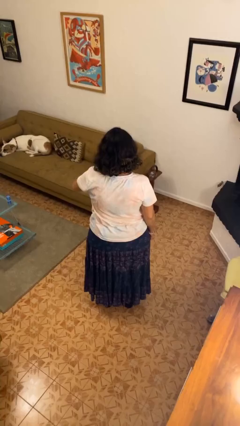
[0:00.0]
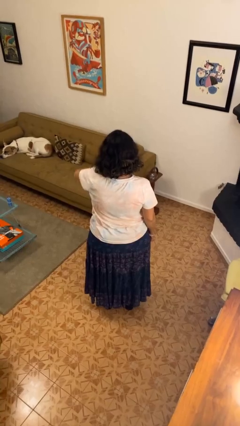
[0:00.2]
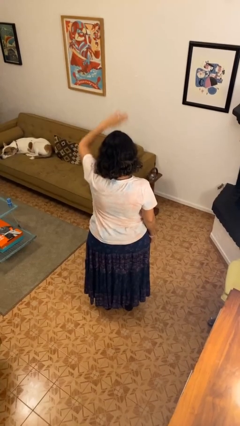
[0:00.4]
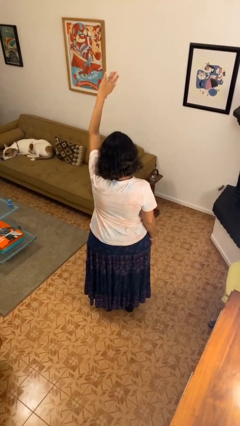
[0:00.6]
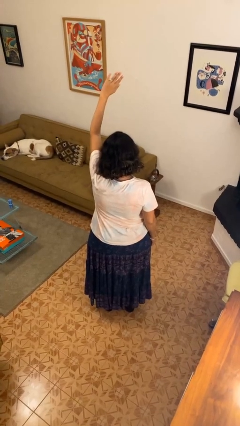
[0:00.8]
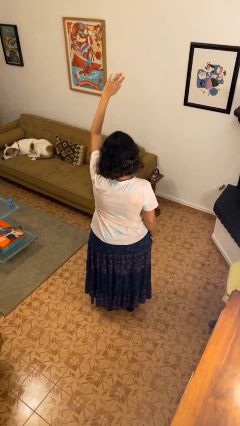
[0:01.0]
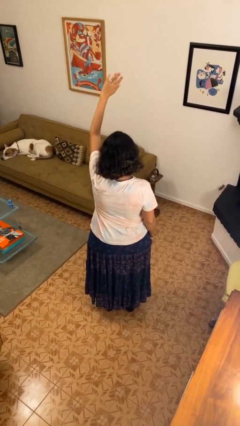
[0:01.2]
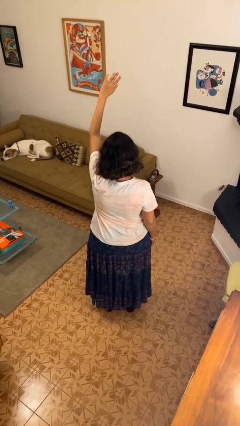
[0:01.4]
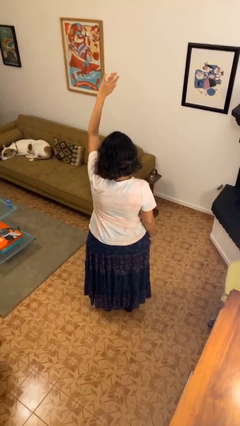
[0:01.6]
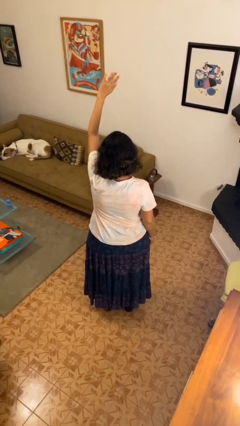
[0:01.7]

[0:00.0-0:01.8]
person gestures swipe up

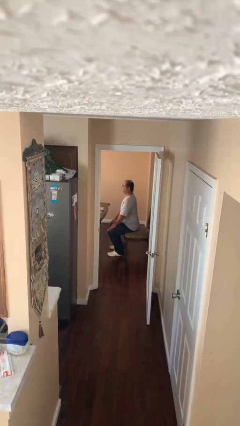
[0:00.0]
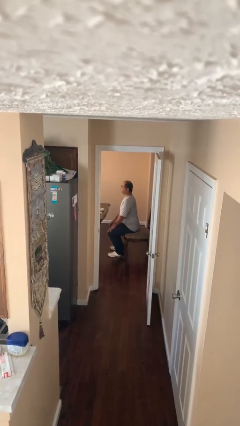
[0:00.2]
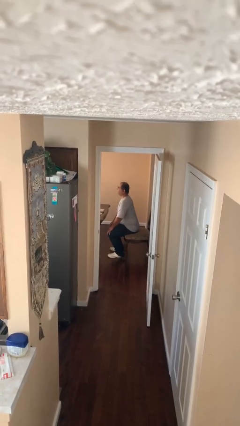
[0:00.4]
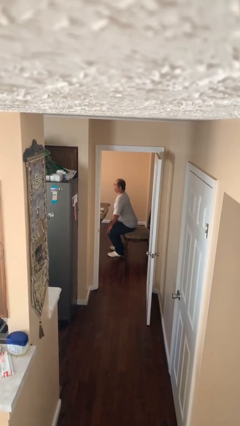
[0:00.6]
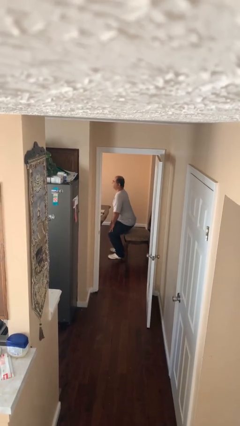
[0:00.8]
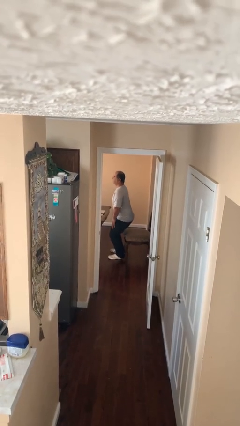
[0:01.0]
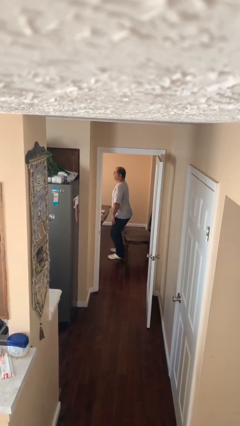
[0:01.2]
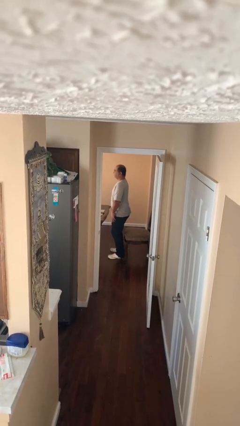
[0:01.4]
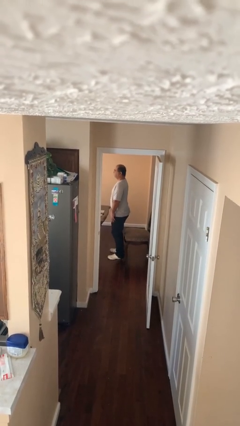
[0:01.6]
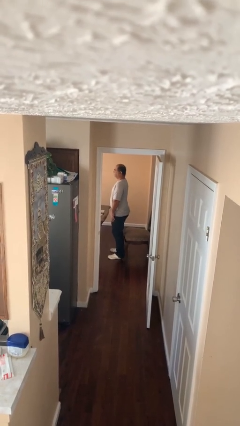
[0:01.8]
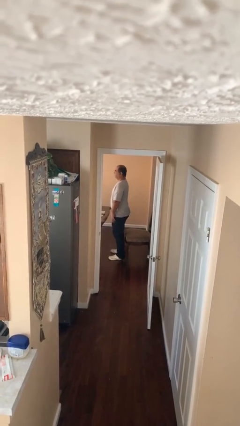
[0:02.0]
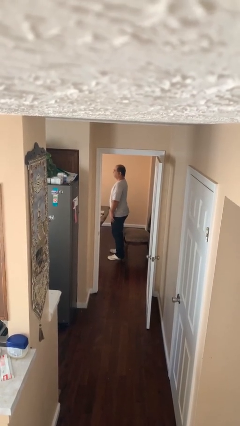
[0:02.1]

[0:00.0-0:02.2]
person stands up

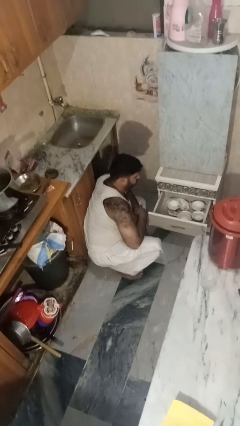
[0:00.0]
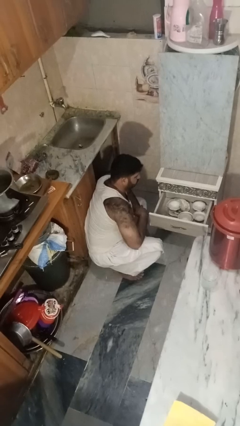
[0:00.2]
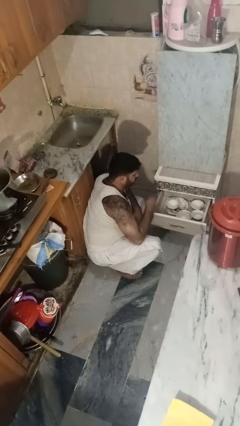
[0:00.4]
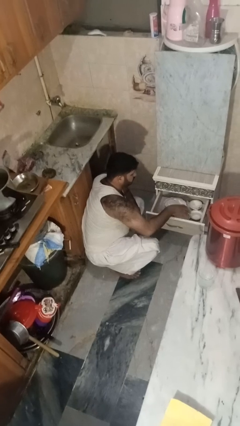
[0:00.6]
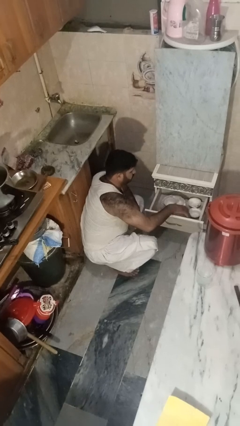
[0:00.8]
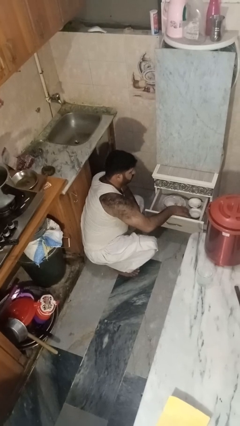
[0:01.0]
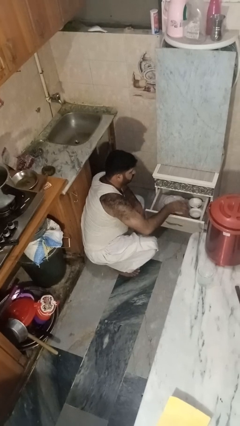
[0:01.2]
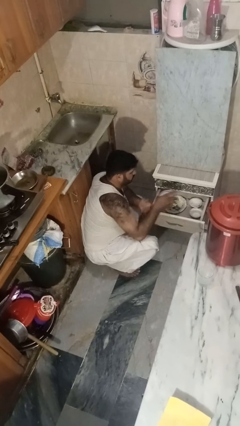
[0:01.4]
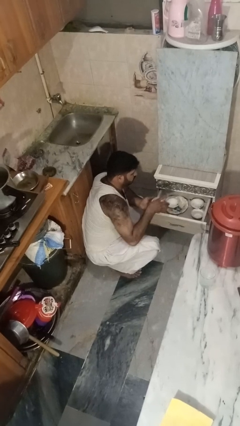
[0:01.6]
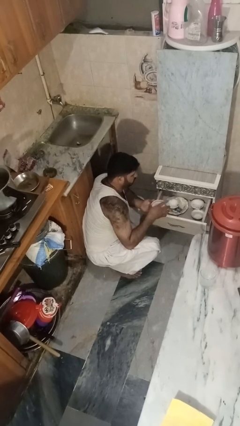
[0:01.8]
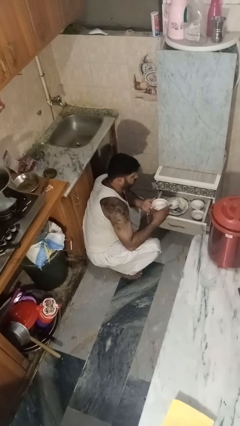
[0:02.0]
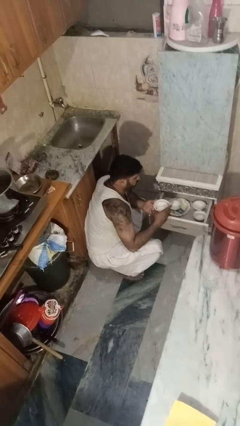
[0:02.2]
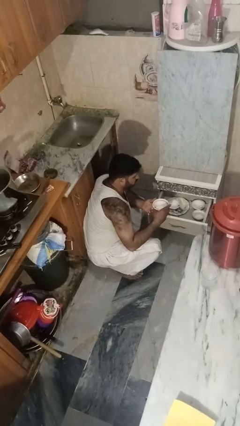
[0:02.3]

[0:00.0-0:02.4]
person takes object from kitchen drawer

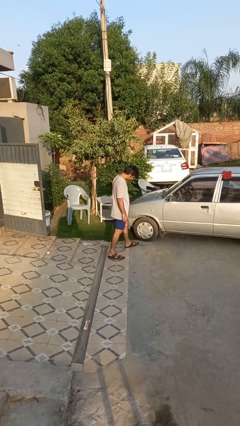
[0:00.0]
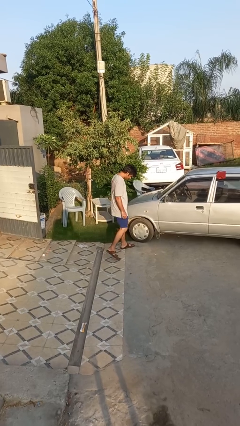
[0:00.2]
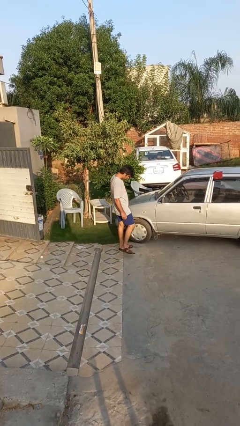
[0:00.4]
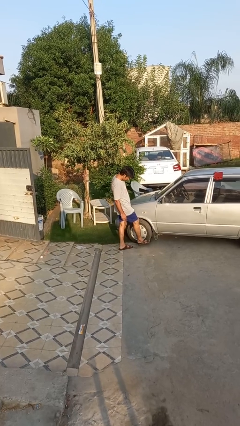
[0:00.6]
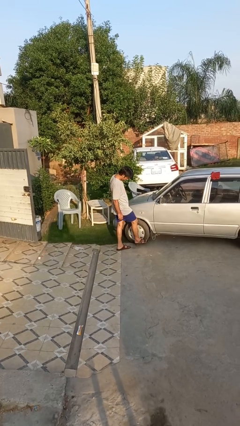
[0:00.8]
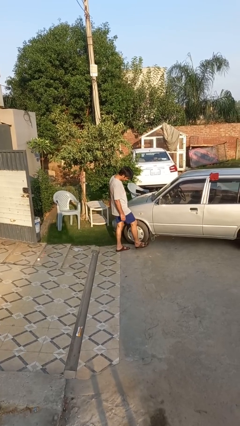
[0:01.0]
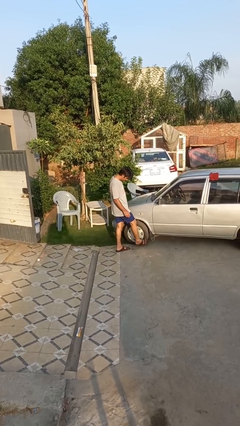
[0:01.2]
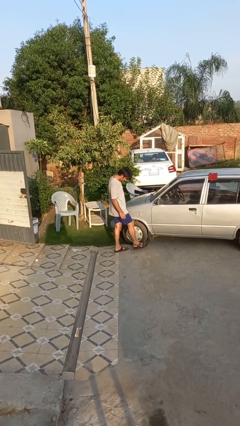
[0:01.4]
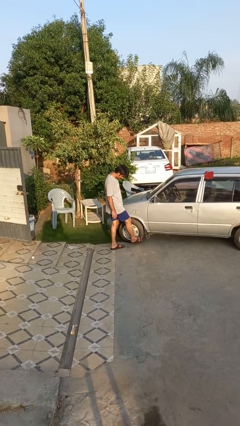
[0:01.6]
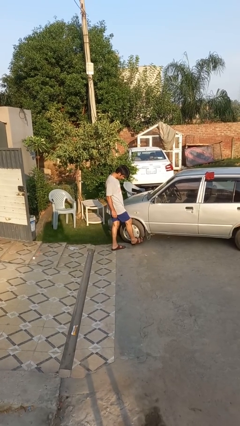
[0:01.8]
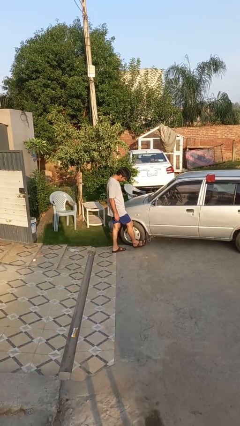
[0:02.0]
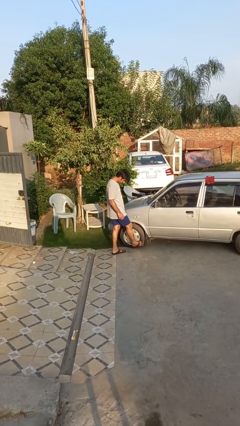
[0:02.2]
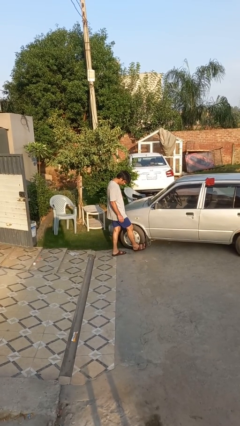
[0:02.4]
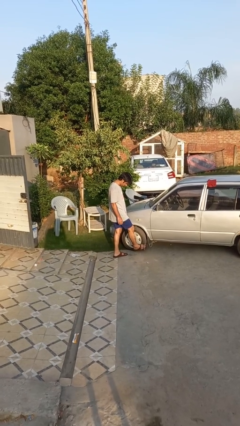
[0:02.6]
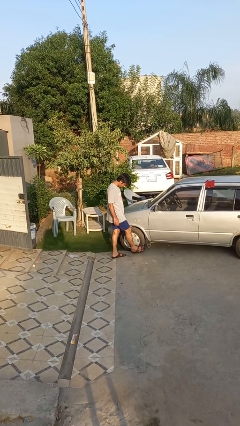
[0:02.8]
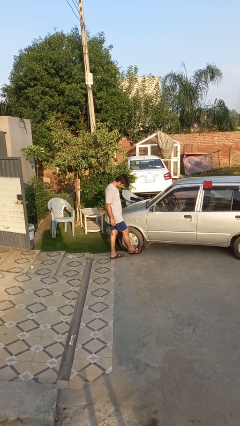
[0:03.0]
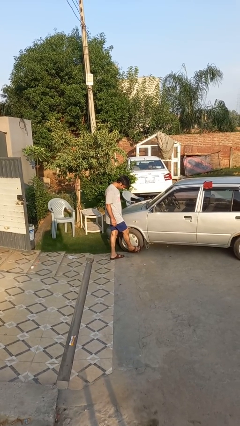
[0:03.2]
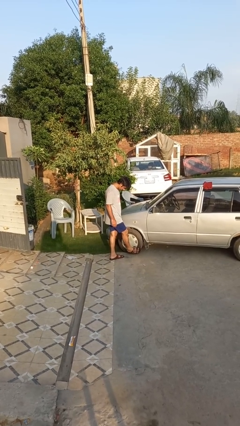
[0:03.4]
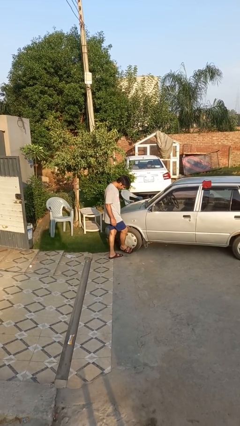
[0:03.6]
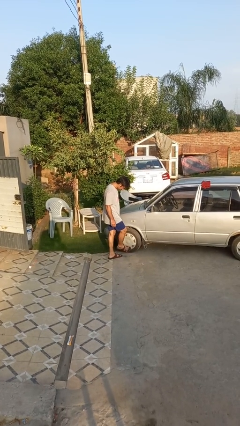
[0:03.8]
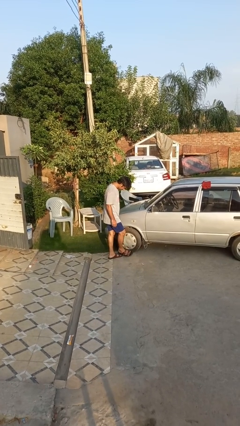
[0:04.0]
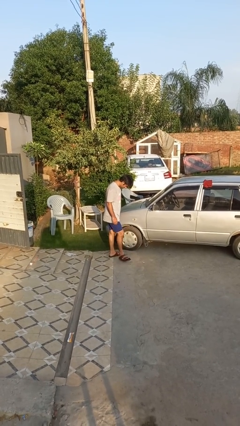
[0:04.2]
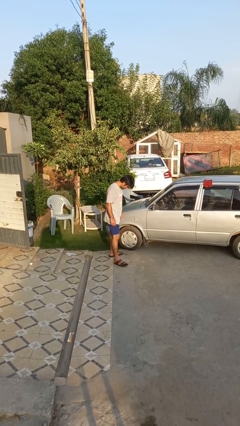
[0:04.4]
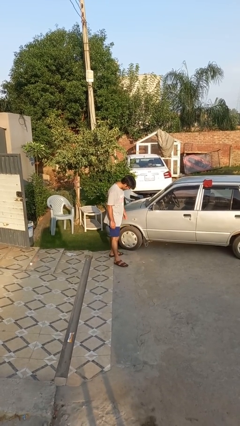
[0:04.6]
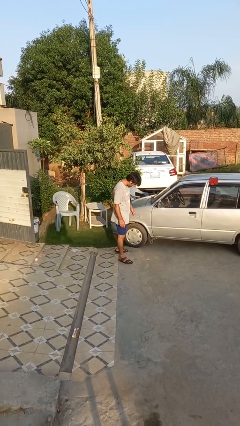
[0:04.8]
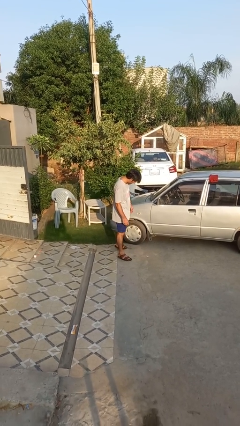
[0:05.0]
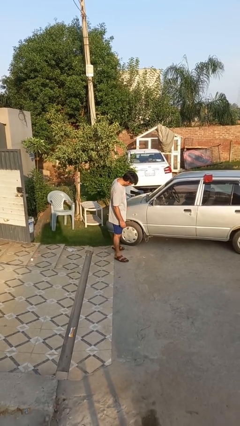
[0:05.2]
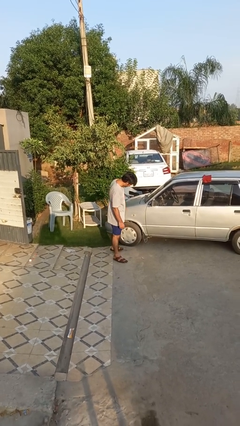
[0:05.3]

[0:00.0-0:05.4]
person kicks car tires

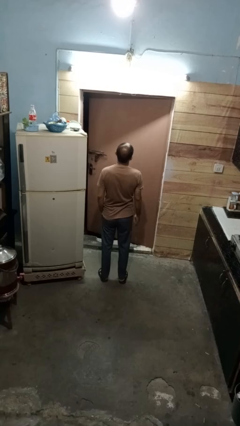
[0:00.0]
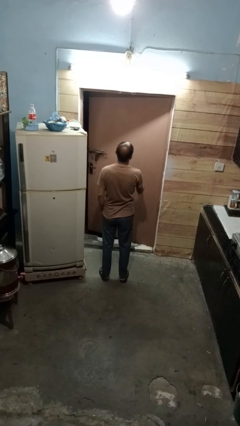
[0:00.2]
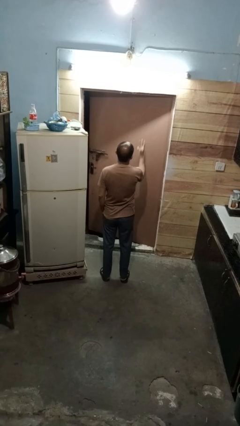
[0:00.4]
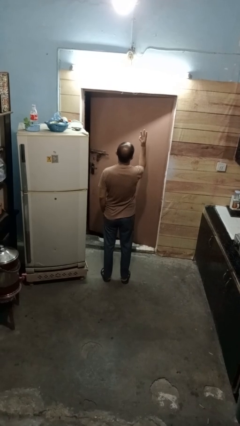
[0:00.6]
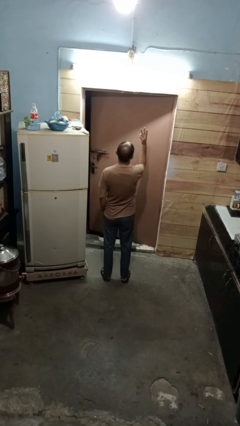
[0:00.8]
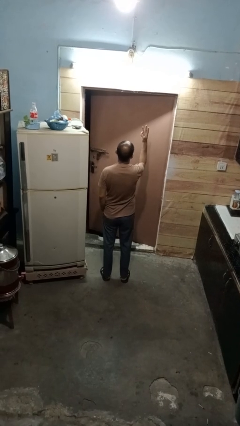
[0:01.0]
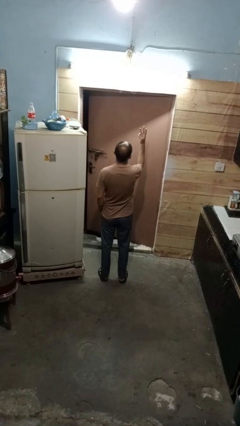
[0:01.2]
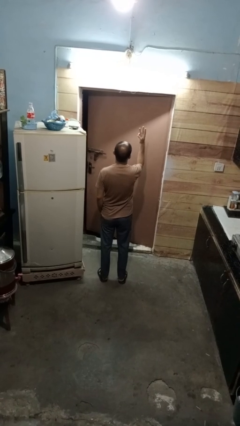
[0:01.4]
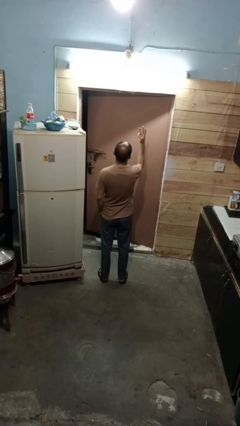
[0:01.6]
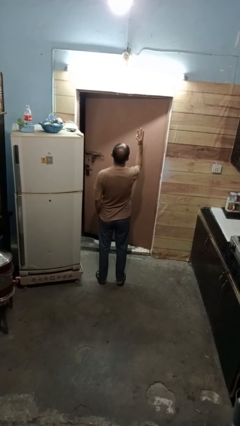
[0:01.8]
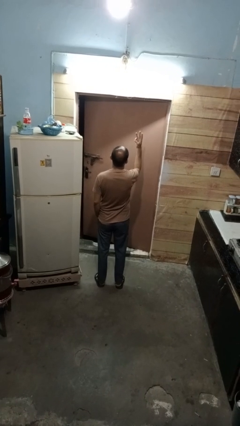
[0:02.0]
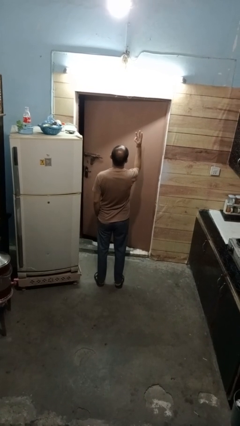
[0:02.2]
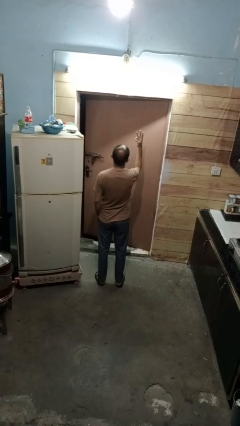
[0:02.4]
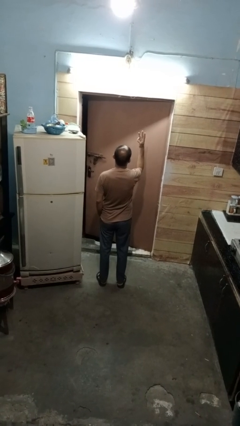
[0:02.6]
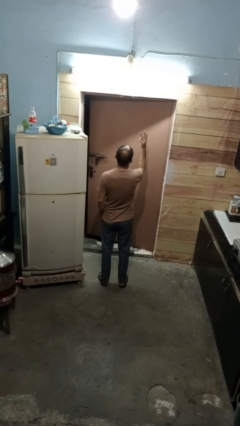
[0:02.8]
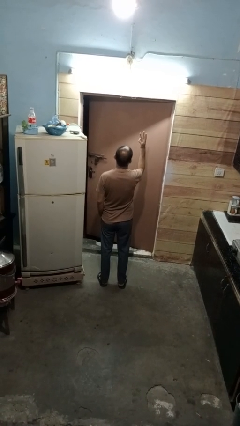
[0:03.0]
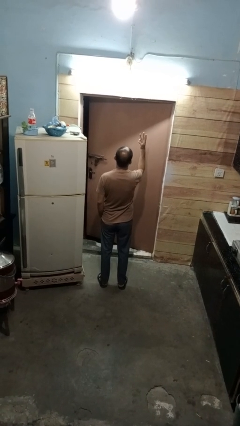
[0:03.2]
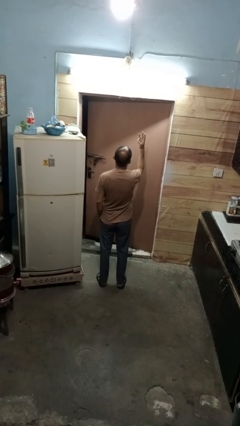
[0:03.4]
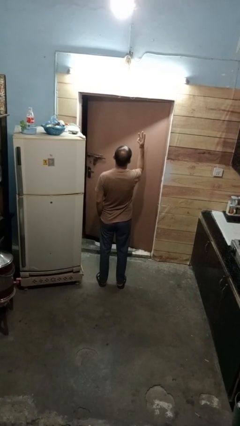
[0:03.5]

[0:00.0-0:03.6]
person gestures number three

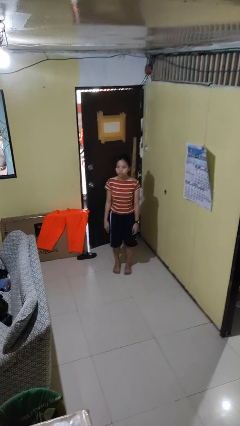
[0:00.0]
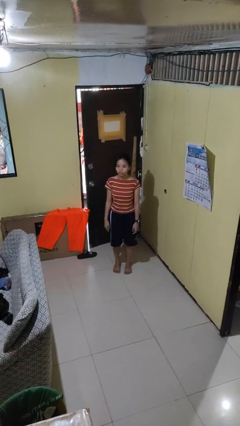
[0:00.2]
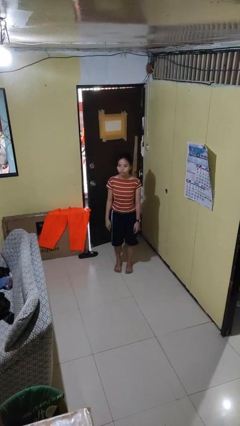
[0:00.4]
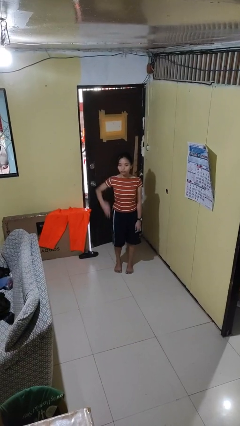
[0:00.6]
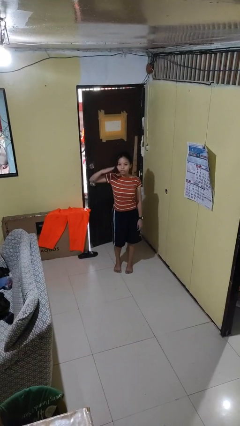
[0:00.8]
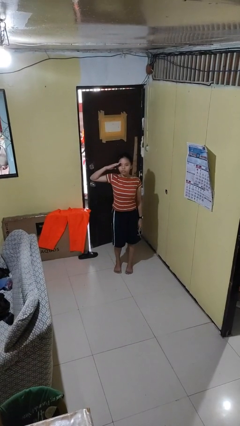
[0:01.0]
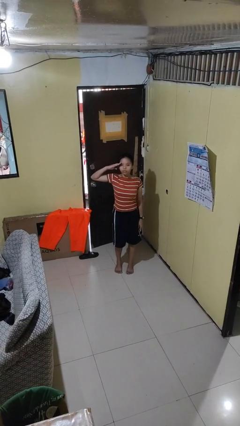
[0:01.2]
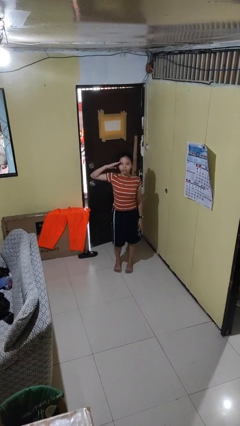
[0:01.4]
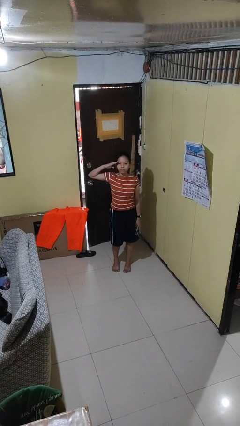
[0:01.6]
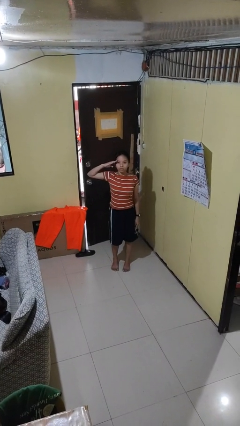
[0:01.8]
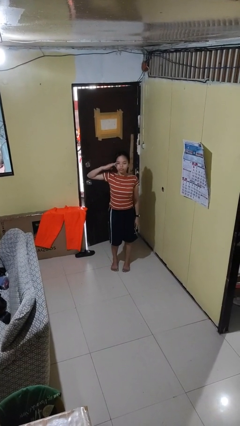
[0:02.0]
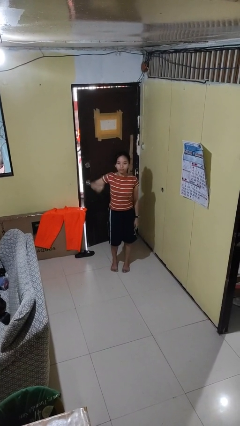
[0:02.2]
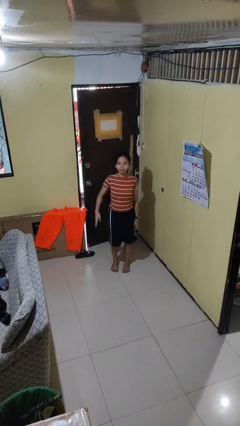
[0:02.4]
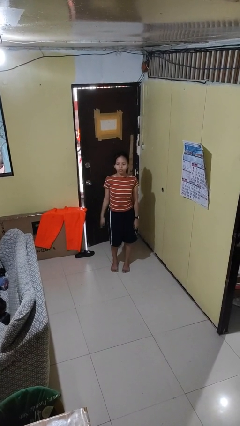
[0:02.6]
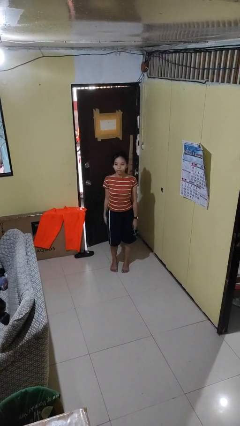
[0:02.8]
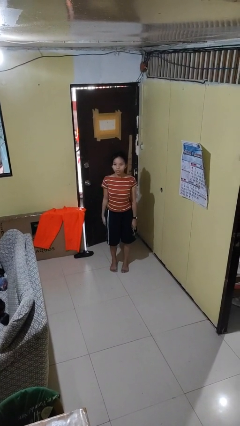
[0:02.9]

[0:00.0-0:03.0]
person salutes
